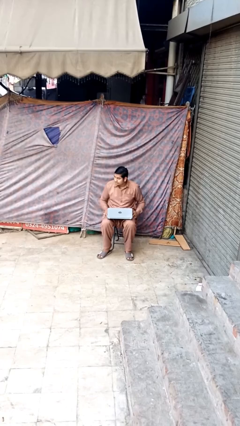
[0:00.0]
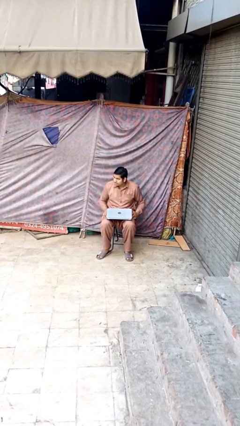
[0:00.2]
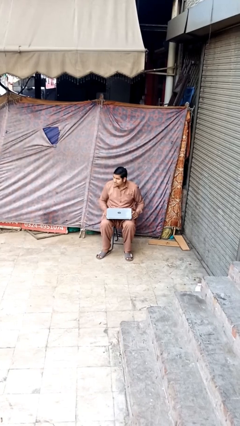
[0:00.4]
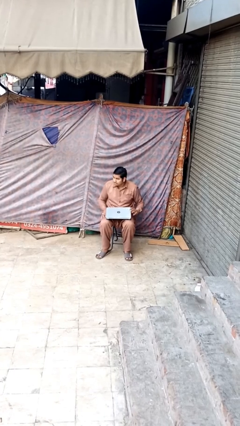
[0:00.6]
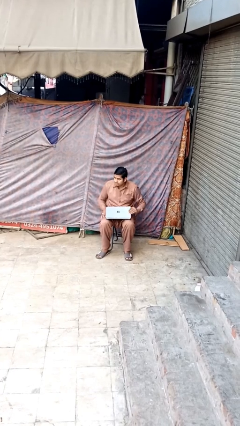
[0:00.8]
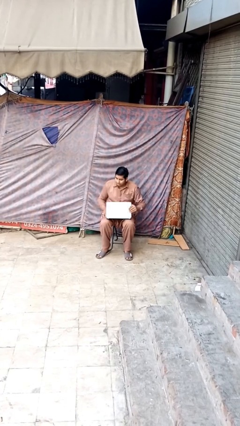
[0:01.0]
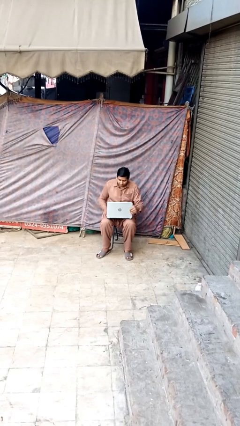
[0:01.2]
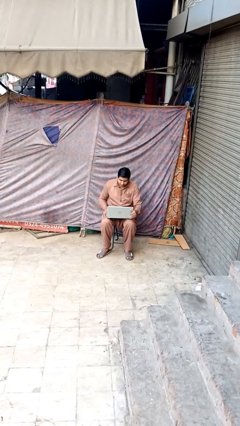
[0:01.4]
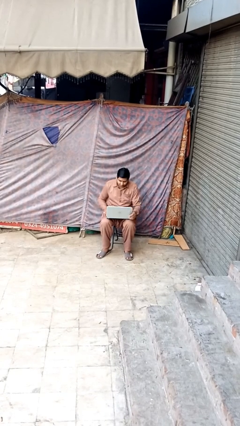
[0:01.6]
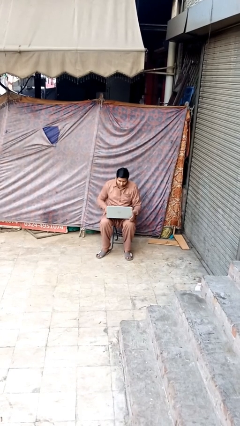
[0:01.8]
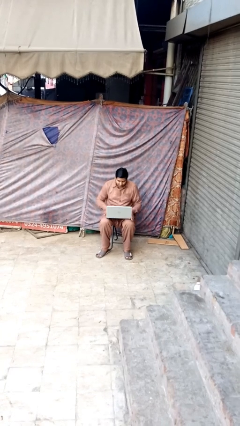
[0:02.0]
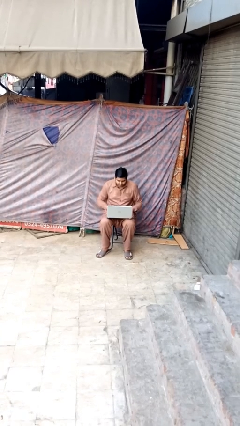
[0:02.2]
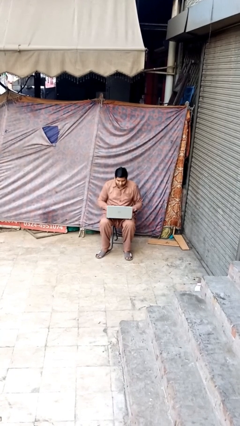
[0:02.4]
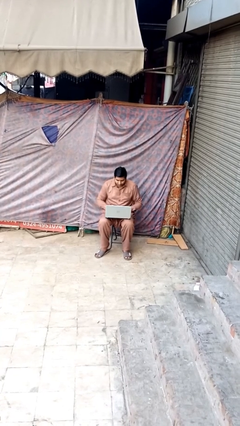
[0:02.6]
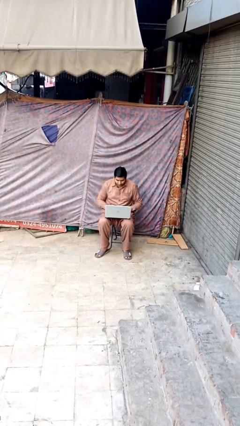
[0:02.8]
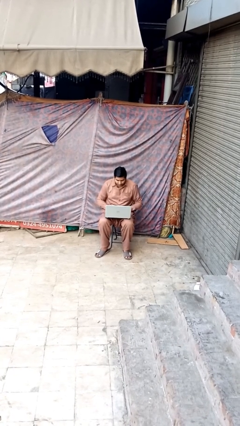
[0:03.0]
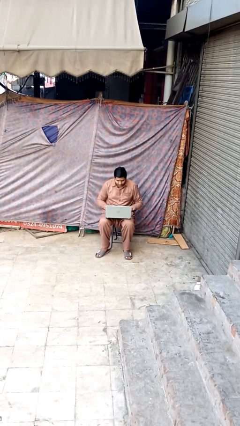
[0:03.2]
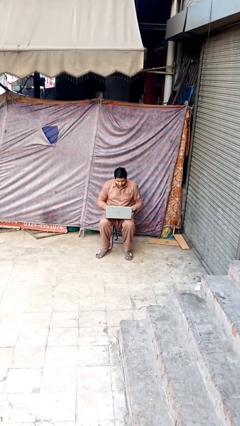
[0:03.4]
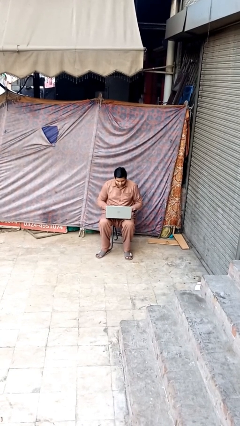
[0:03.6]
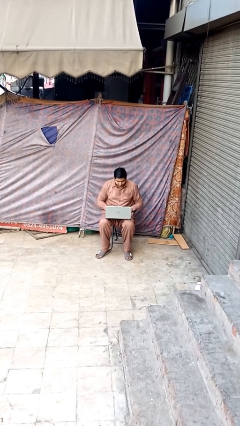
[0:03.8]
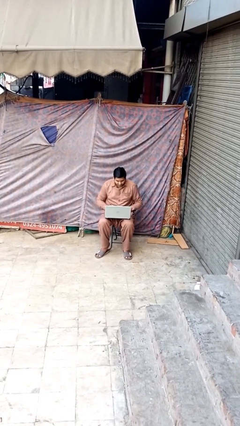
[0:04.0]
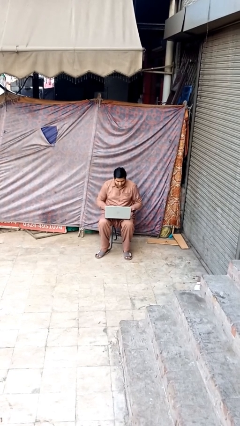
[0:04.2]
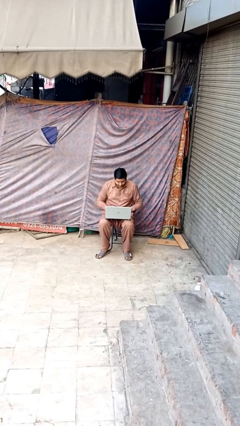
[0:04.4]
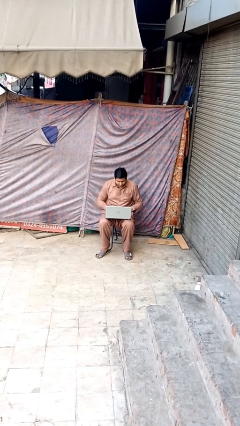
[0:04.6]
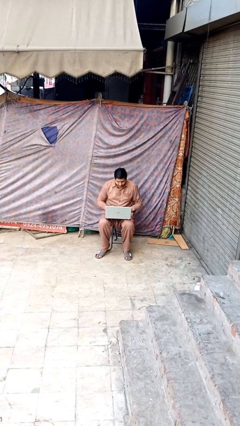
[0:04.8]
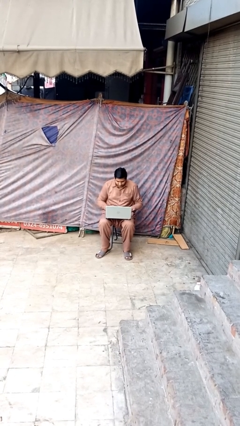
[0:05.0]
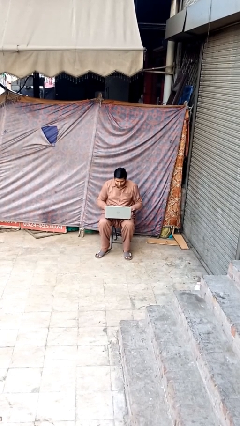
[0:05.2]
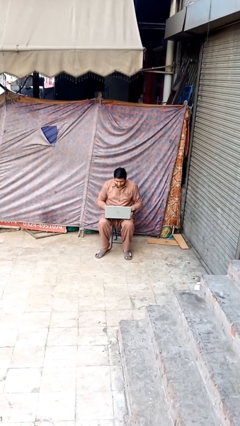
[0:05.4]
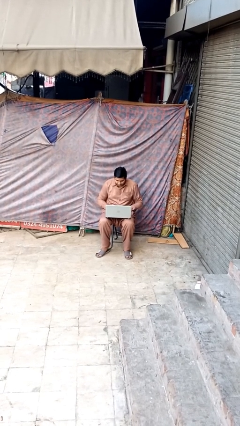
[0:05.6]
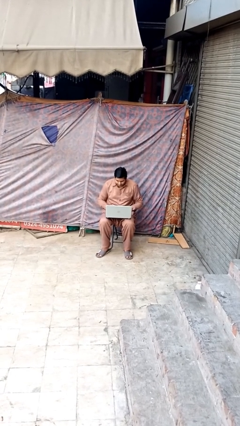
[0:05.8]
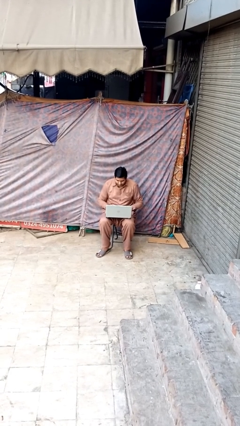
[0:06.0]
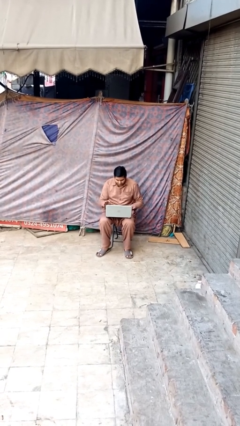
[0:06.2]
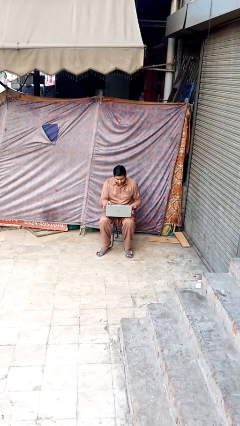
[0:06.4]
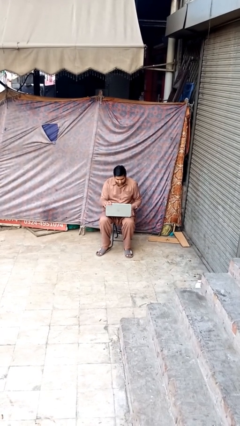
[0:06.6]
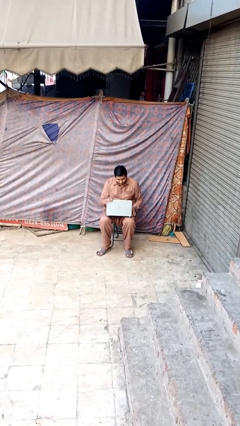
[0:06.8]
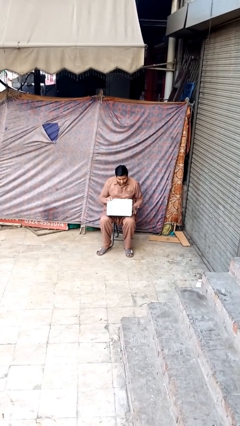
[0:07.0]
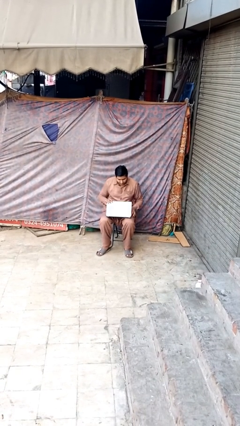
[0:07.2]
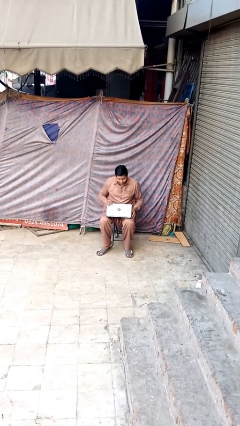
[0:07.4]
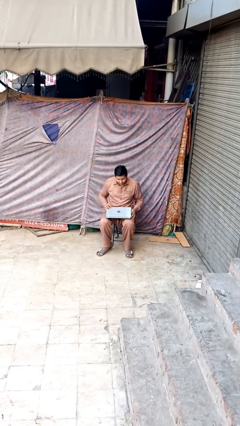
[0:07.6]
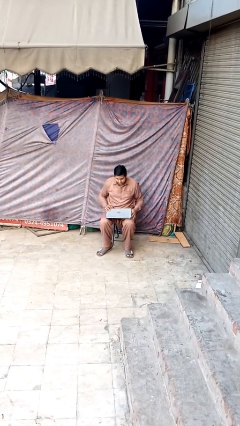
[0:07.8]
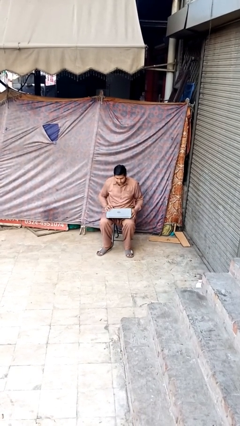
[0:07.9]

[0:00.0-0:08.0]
person interacts with laptop

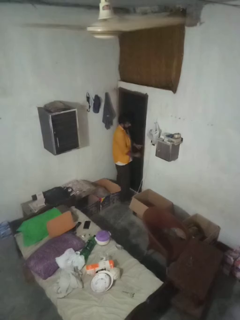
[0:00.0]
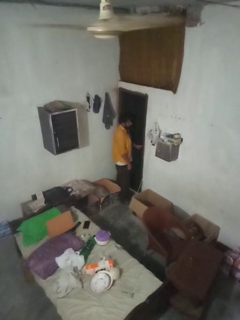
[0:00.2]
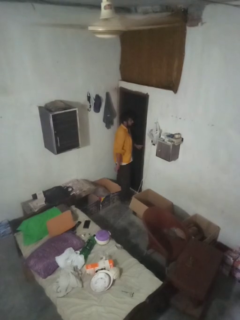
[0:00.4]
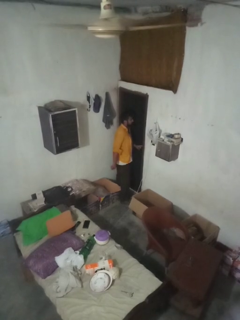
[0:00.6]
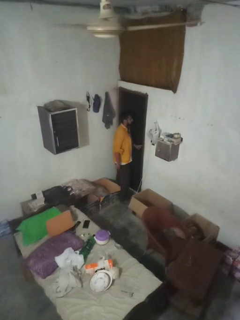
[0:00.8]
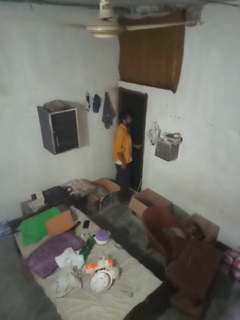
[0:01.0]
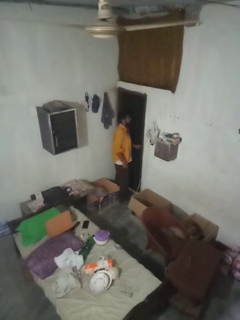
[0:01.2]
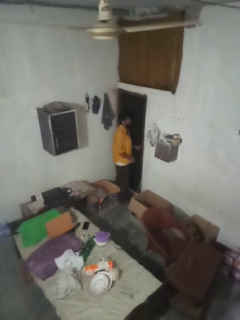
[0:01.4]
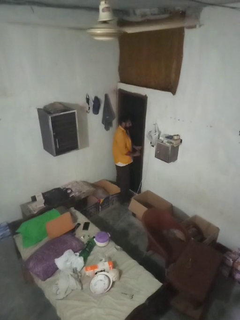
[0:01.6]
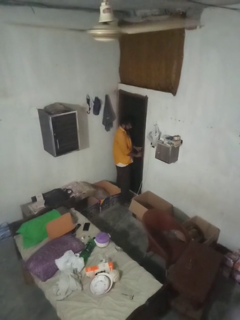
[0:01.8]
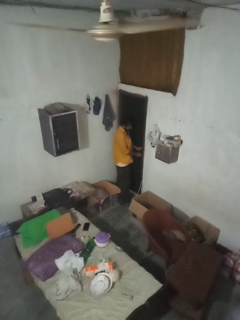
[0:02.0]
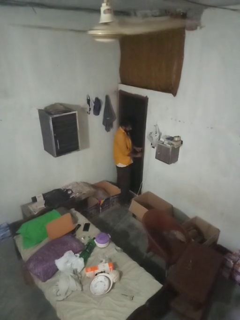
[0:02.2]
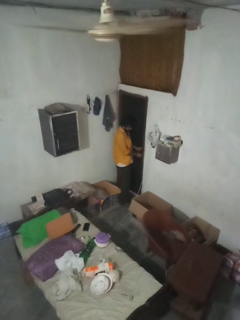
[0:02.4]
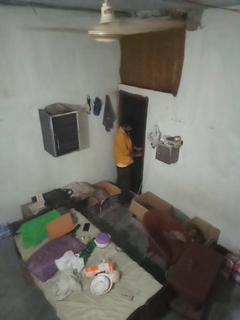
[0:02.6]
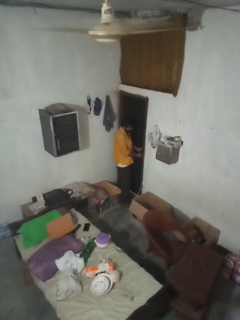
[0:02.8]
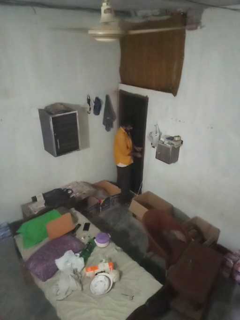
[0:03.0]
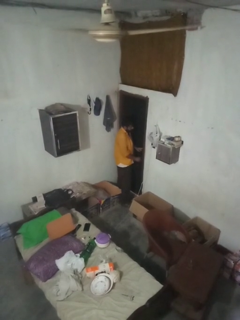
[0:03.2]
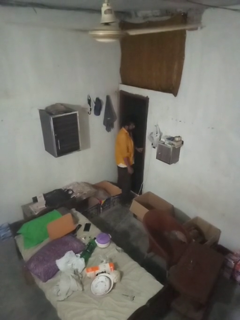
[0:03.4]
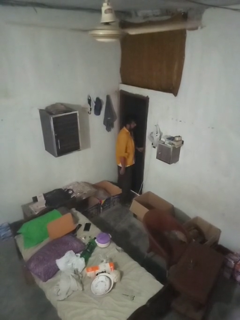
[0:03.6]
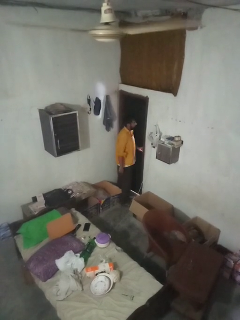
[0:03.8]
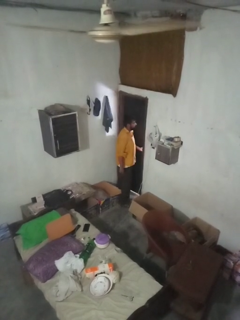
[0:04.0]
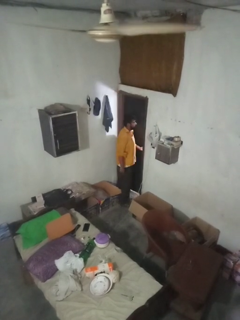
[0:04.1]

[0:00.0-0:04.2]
person unlocks door with keys

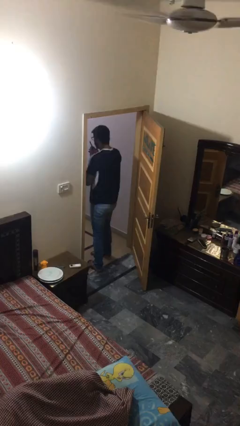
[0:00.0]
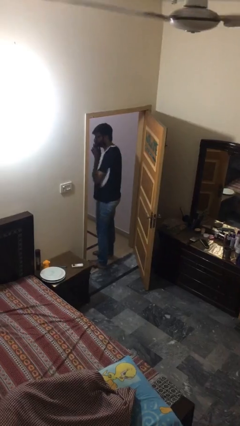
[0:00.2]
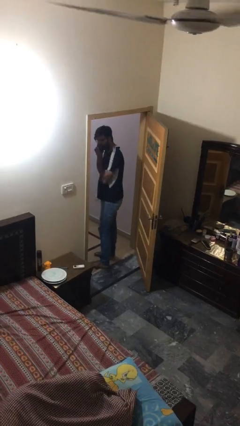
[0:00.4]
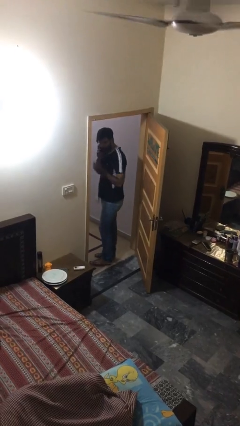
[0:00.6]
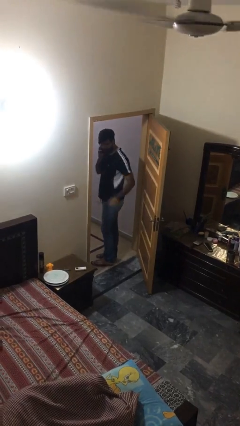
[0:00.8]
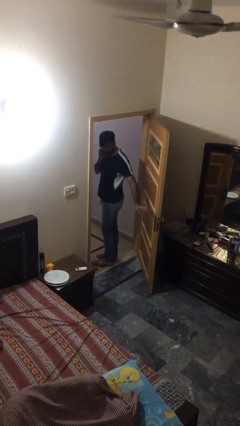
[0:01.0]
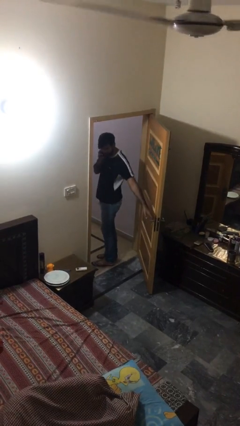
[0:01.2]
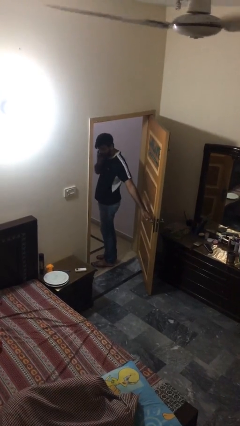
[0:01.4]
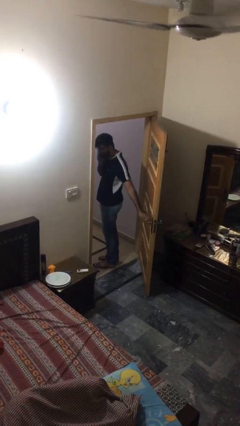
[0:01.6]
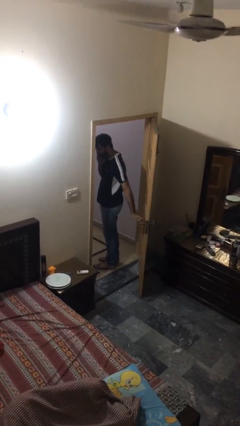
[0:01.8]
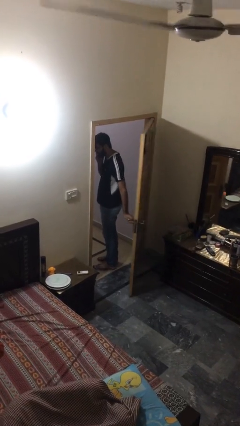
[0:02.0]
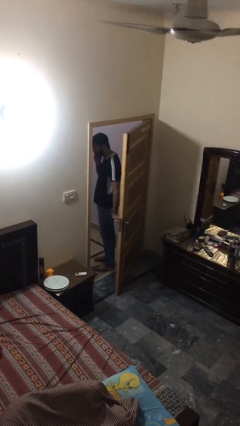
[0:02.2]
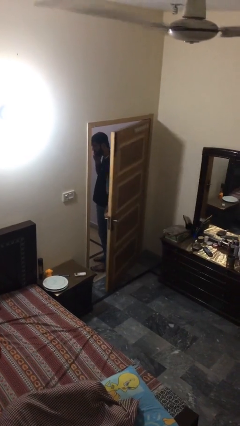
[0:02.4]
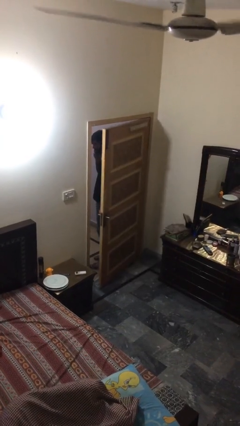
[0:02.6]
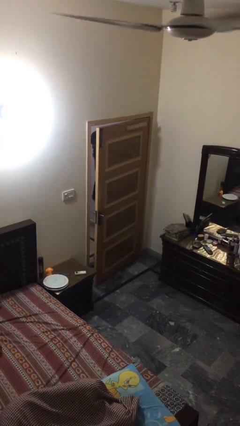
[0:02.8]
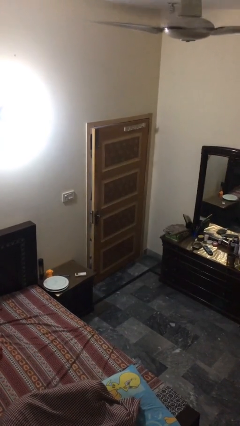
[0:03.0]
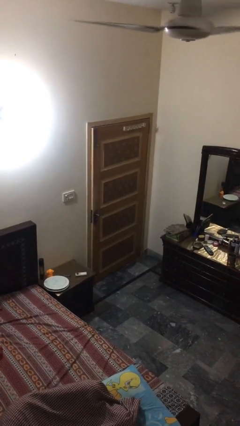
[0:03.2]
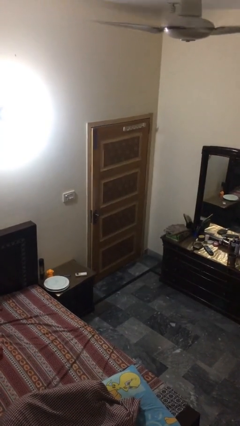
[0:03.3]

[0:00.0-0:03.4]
person closes facility door

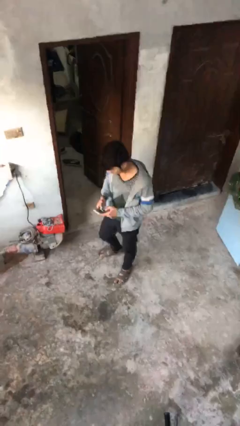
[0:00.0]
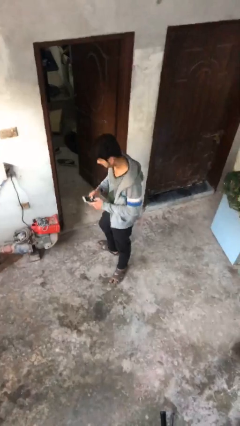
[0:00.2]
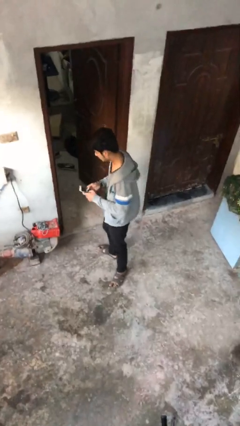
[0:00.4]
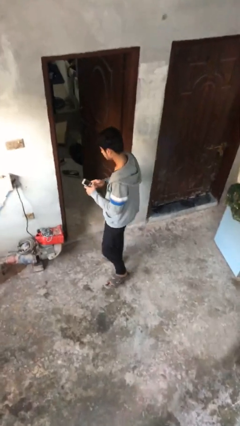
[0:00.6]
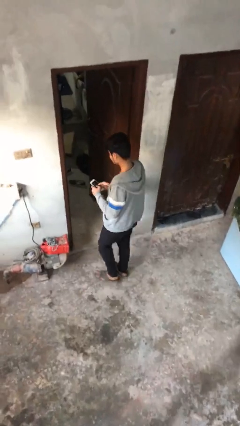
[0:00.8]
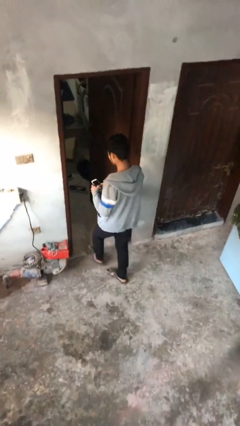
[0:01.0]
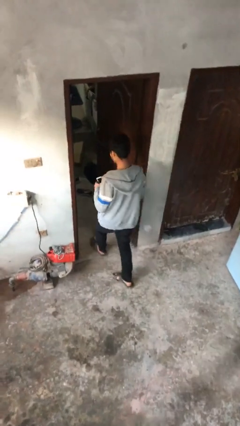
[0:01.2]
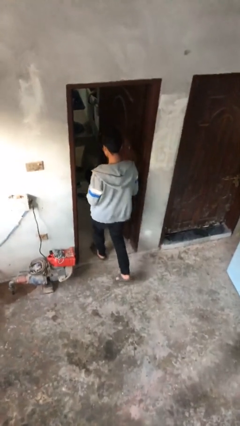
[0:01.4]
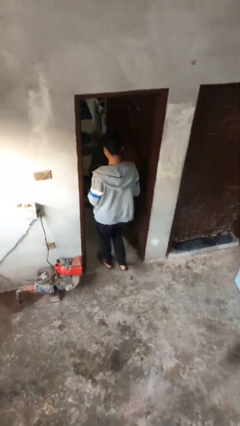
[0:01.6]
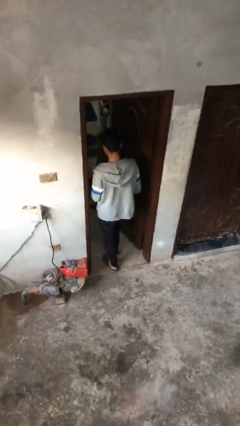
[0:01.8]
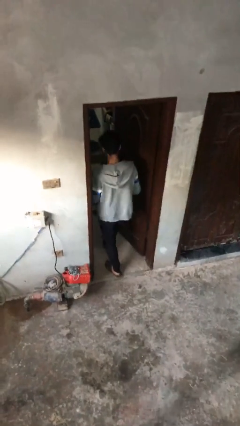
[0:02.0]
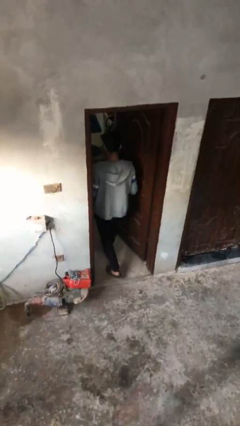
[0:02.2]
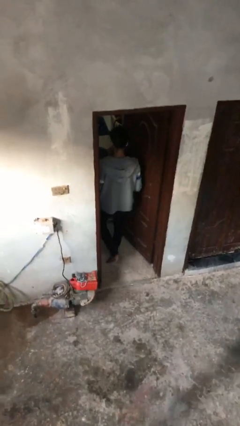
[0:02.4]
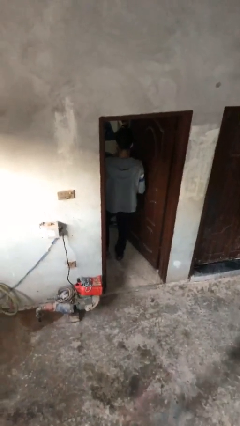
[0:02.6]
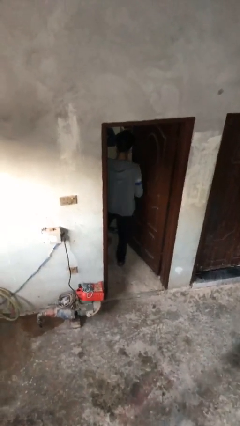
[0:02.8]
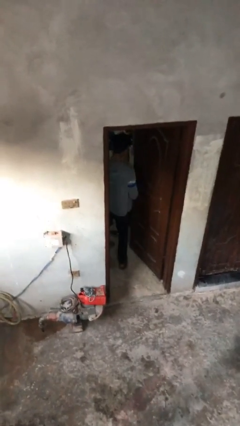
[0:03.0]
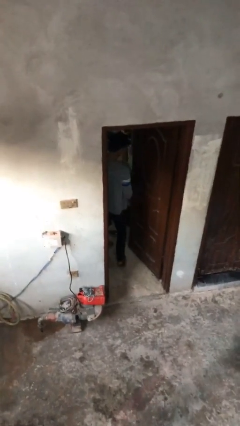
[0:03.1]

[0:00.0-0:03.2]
person enters scene through structure
